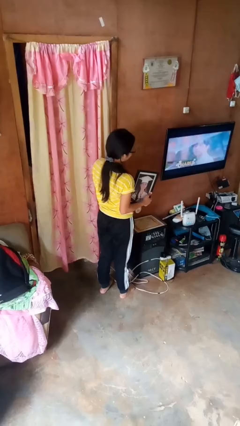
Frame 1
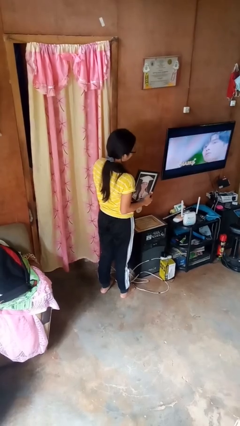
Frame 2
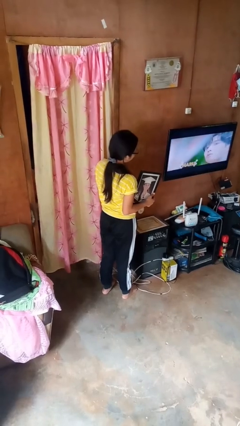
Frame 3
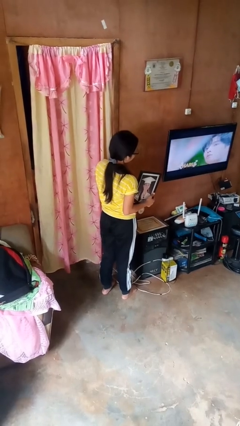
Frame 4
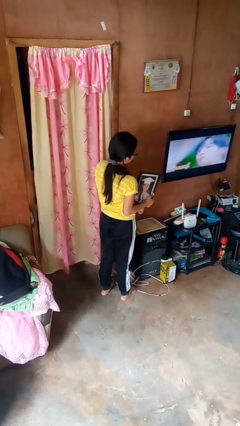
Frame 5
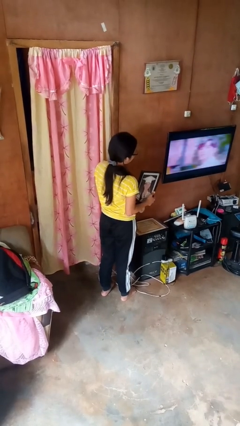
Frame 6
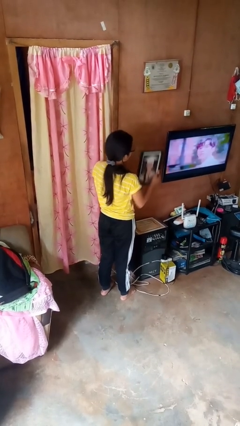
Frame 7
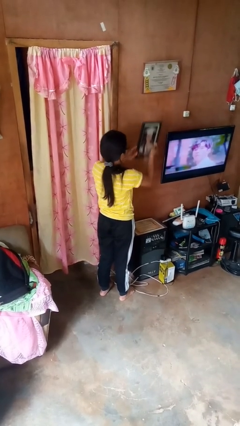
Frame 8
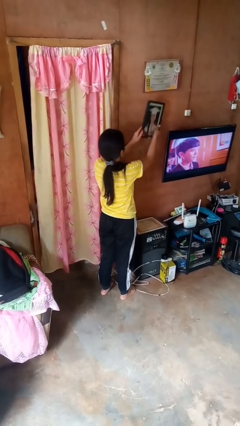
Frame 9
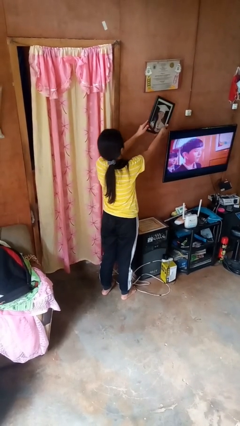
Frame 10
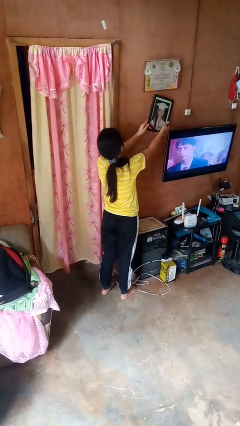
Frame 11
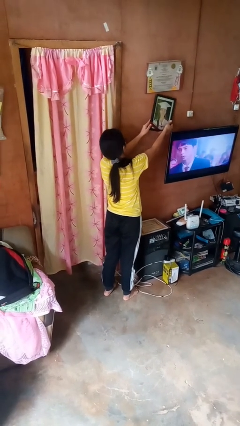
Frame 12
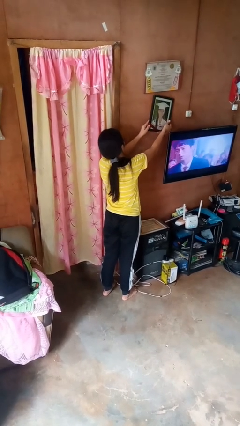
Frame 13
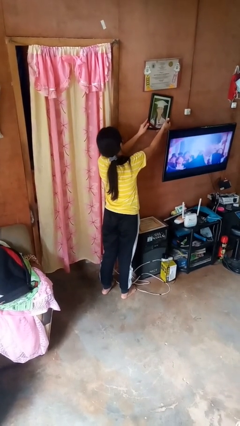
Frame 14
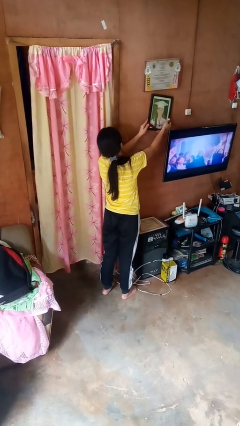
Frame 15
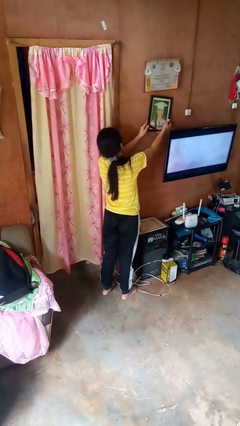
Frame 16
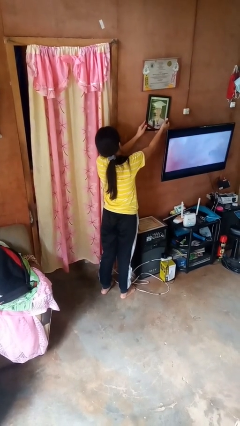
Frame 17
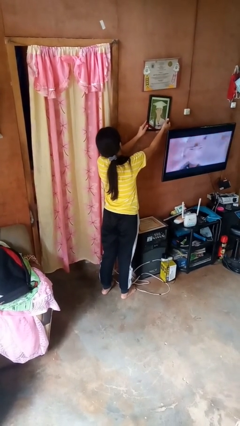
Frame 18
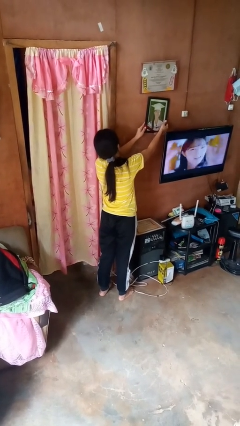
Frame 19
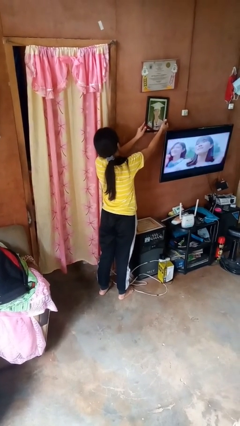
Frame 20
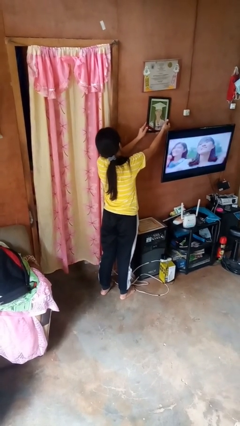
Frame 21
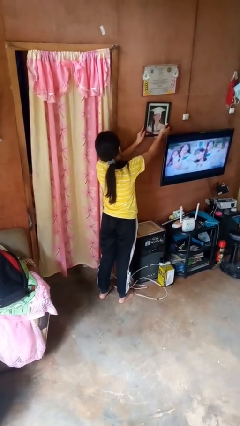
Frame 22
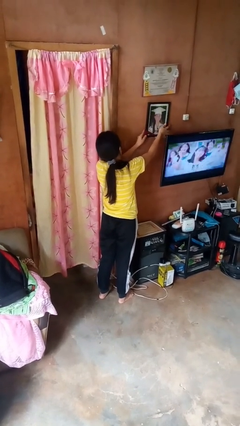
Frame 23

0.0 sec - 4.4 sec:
person puts up picture frame

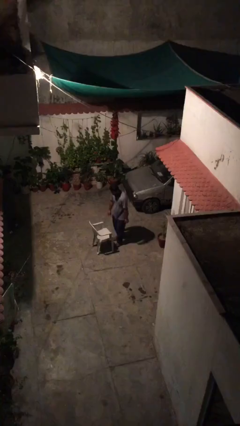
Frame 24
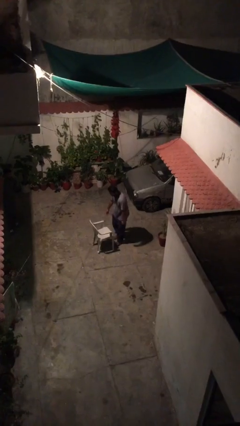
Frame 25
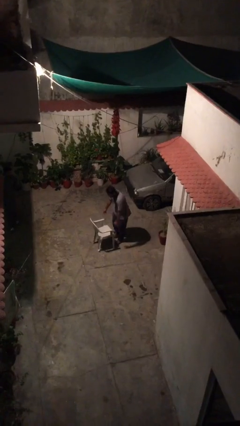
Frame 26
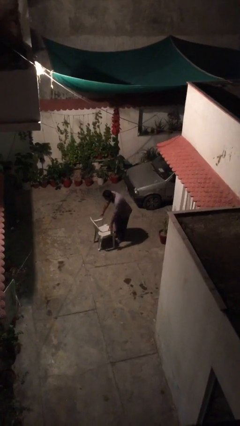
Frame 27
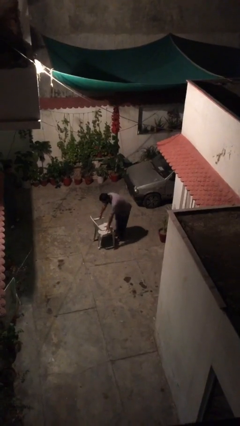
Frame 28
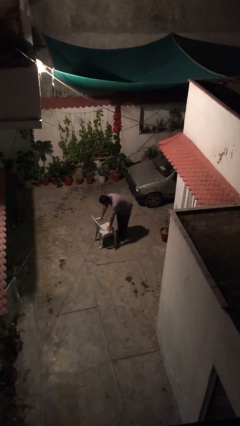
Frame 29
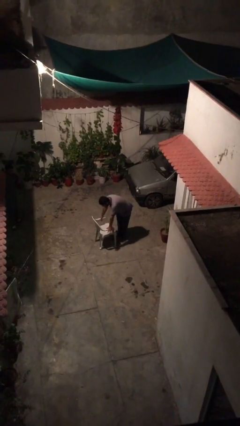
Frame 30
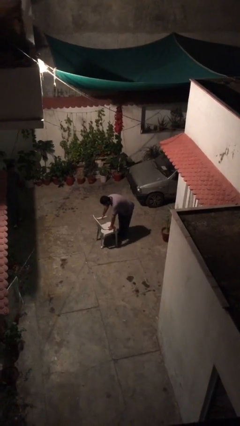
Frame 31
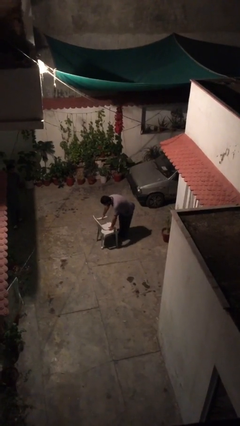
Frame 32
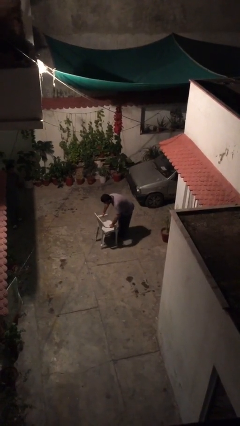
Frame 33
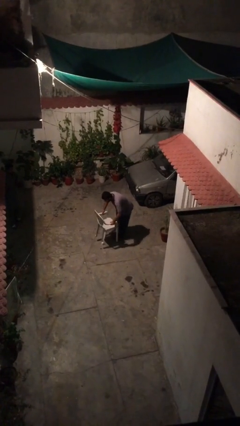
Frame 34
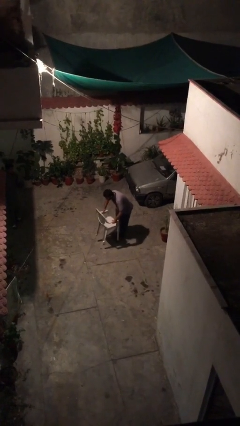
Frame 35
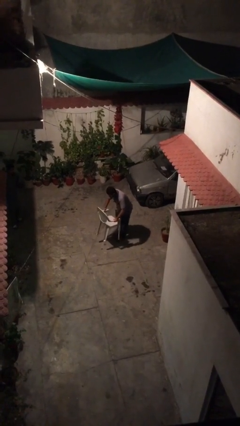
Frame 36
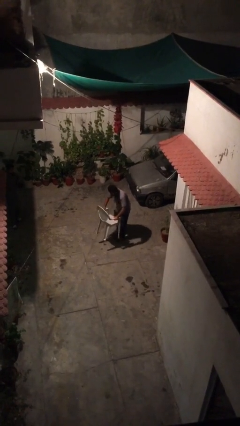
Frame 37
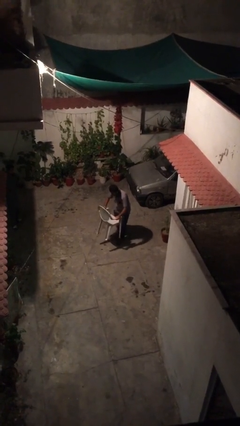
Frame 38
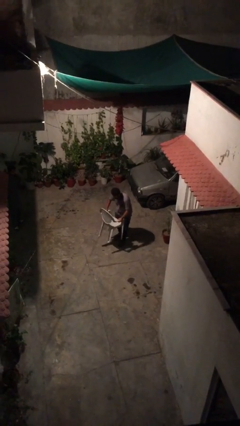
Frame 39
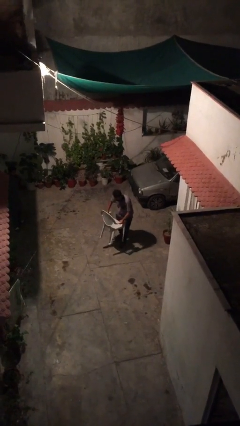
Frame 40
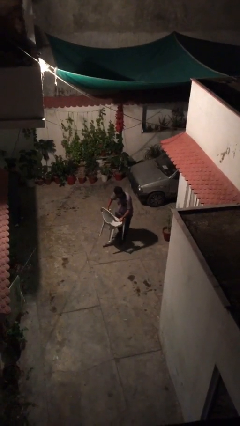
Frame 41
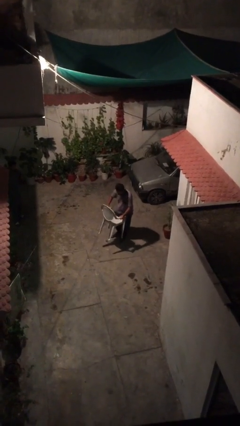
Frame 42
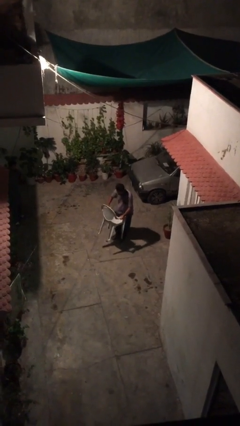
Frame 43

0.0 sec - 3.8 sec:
person picks up object from floor

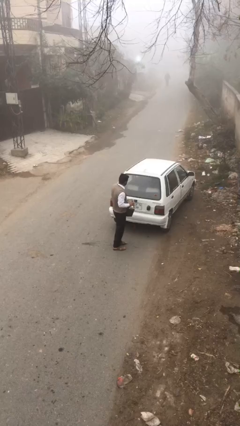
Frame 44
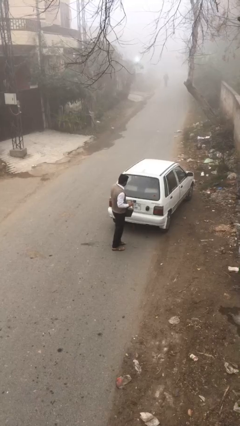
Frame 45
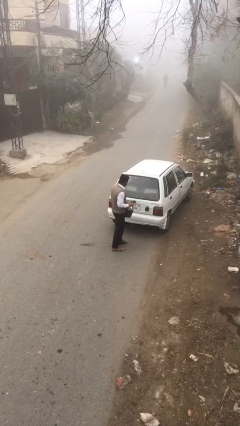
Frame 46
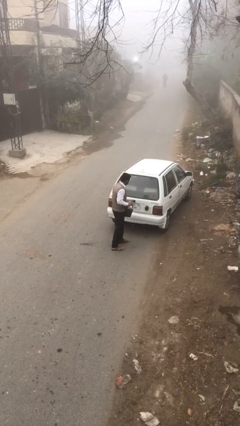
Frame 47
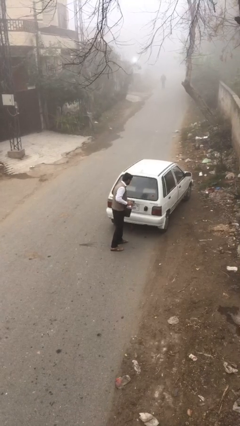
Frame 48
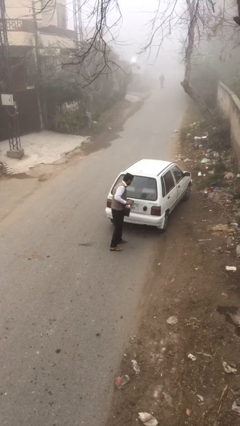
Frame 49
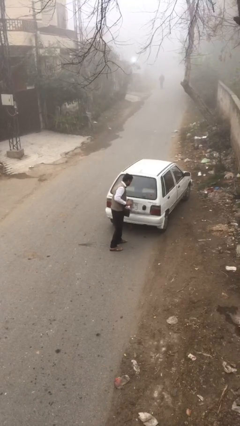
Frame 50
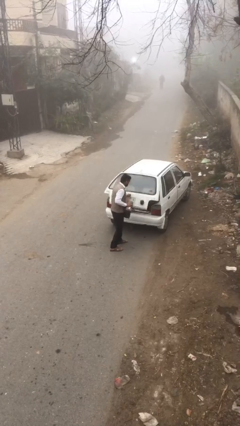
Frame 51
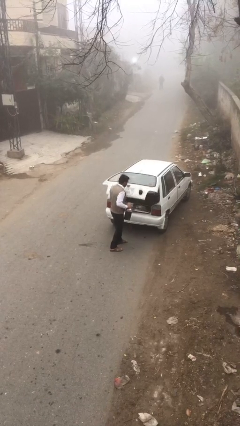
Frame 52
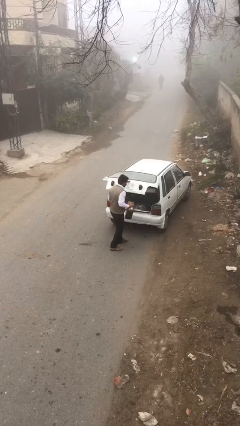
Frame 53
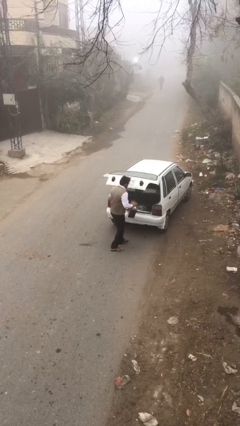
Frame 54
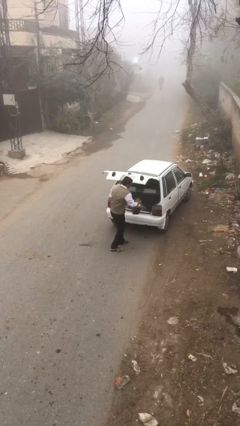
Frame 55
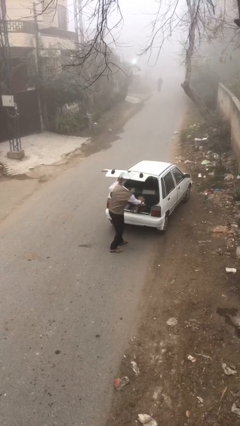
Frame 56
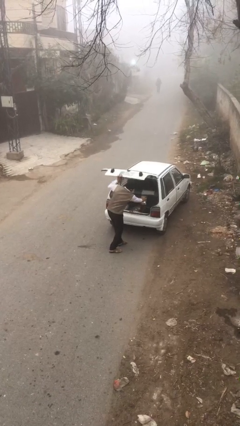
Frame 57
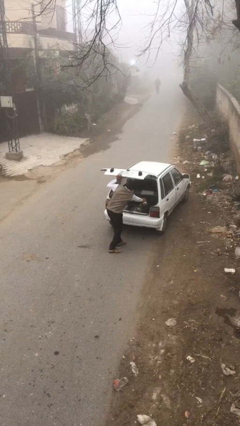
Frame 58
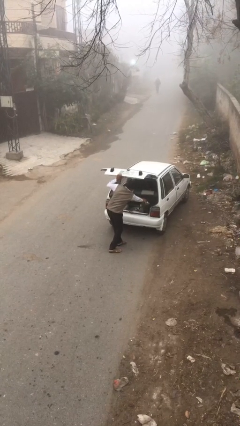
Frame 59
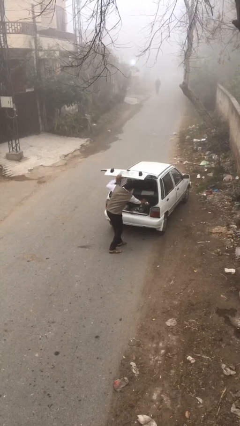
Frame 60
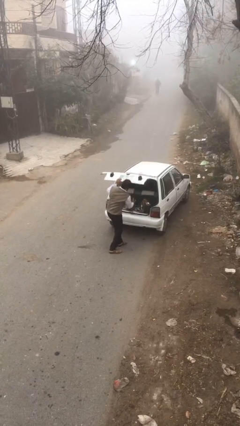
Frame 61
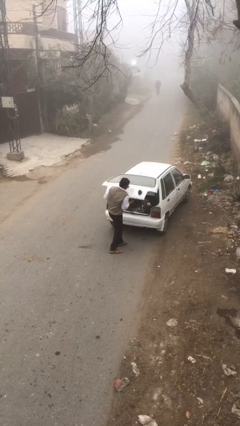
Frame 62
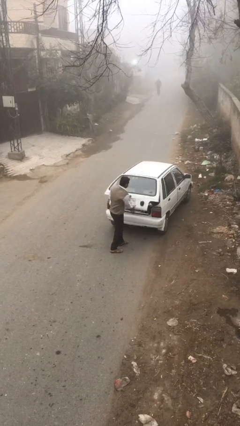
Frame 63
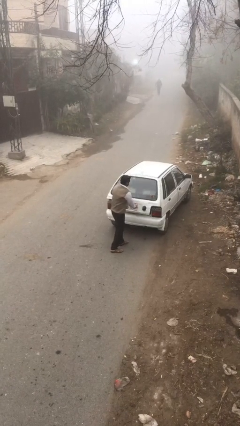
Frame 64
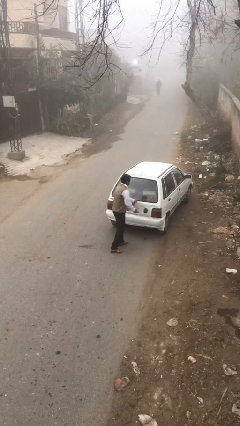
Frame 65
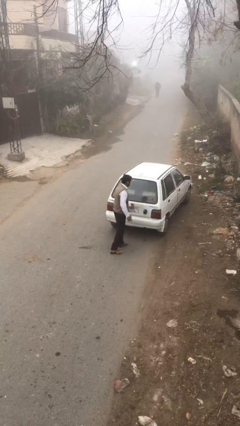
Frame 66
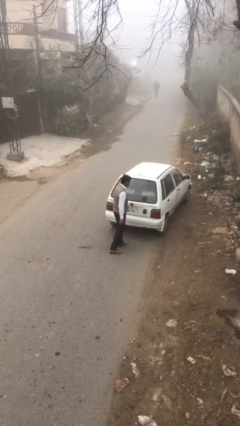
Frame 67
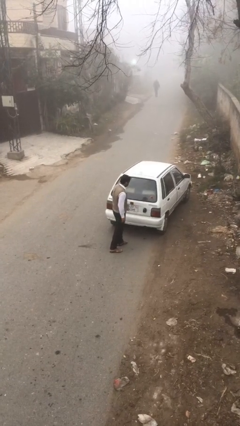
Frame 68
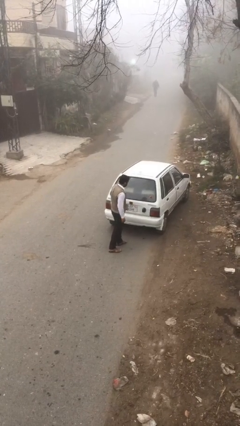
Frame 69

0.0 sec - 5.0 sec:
person loads car

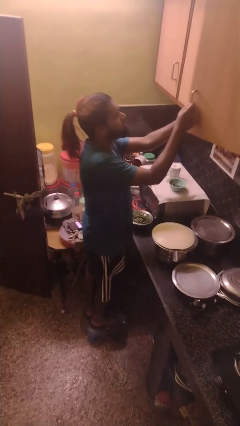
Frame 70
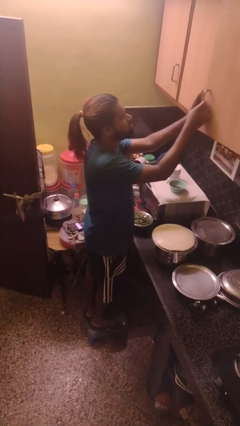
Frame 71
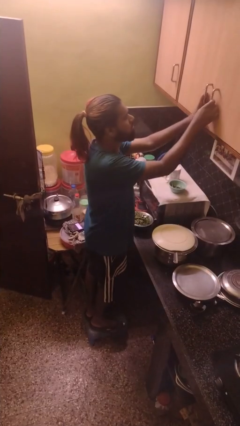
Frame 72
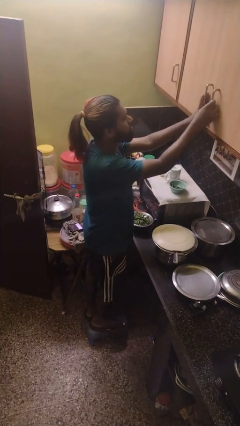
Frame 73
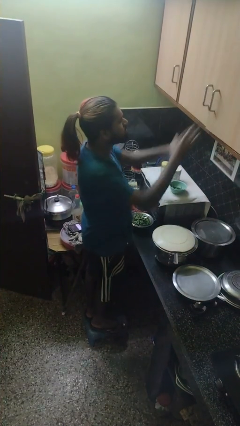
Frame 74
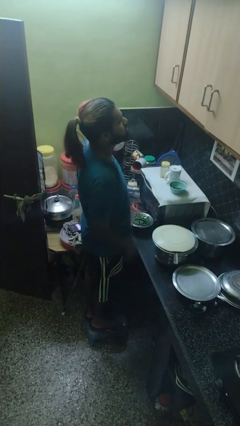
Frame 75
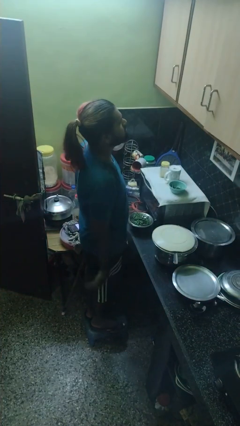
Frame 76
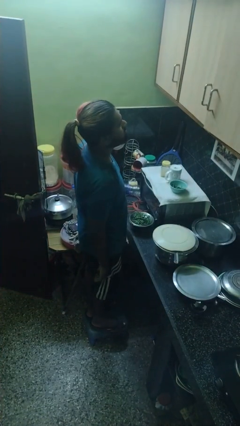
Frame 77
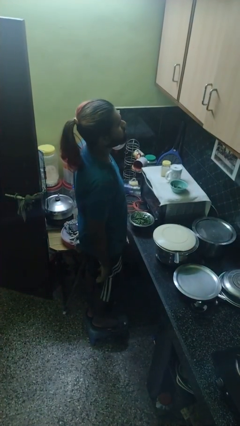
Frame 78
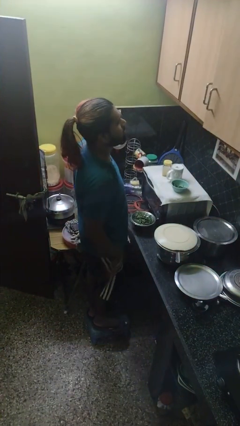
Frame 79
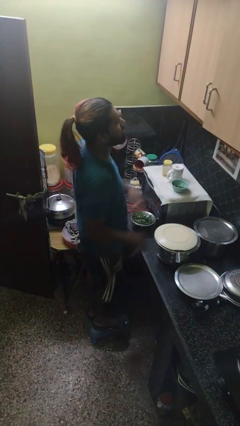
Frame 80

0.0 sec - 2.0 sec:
person closes cabinet

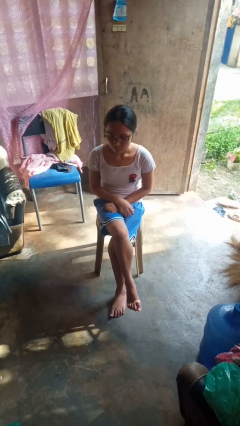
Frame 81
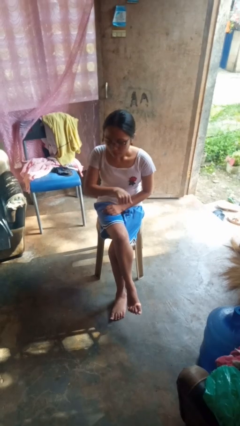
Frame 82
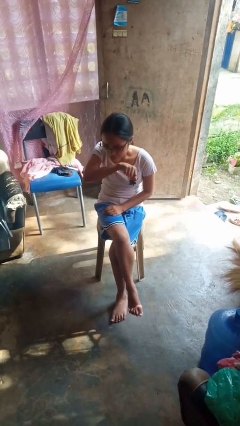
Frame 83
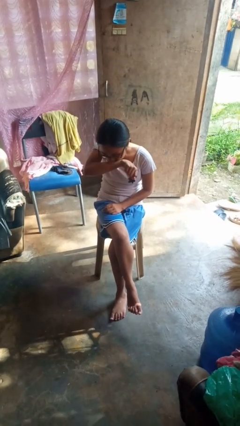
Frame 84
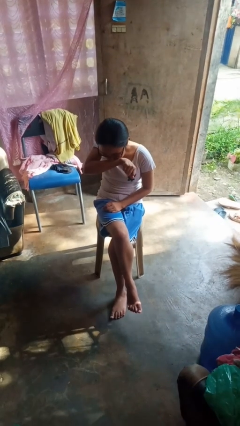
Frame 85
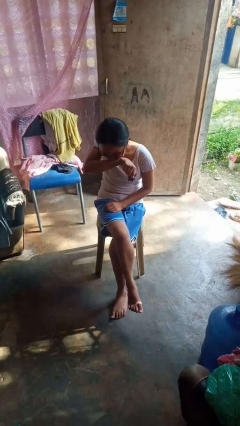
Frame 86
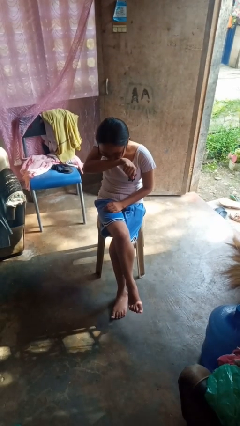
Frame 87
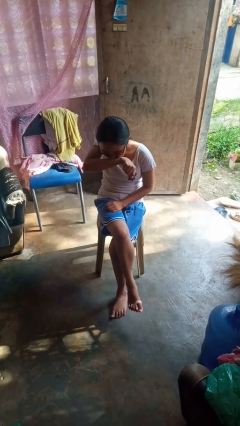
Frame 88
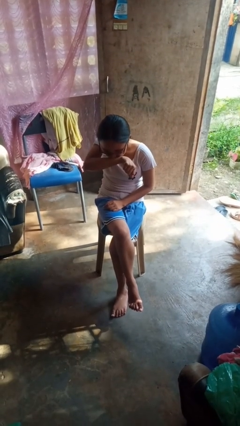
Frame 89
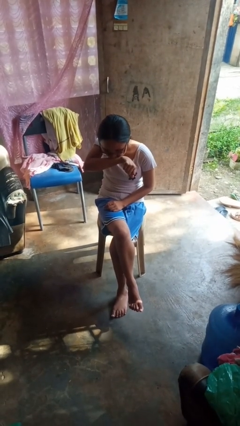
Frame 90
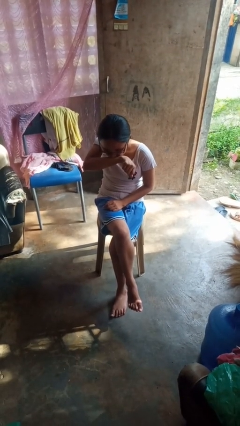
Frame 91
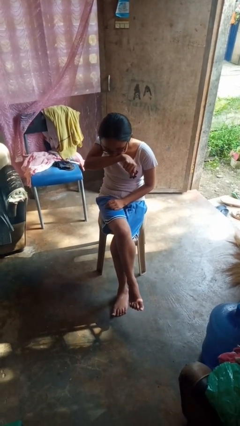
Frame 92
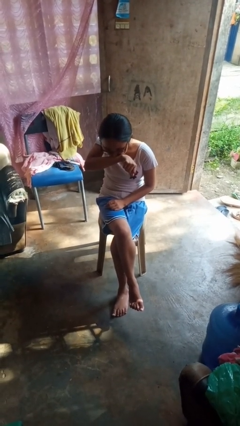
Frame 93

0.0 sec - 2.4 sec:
person sneezes into arm
